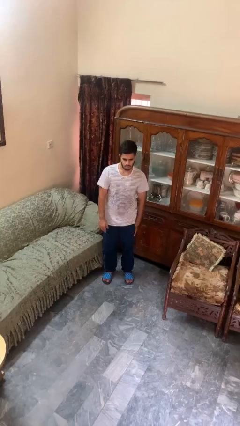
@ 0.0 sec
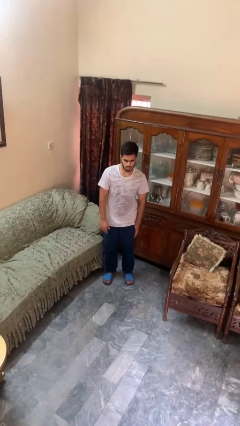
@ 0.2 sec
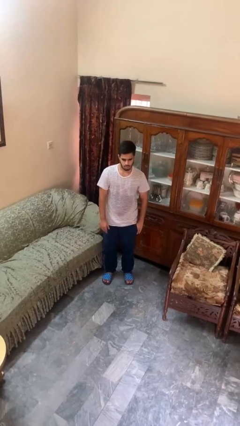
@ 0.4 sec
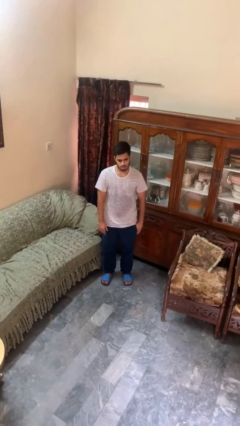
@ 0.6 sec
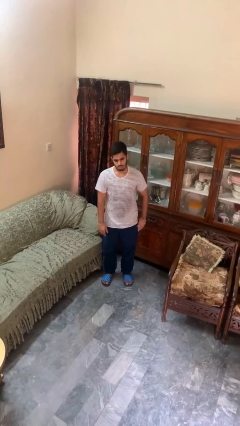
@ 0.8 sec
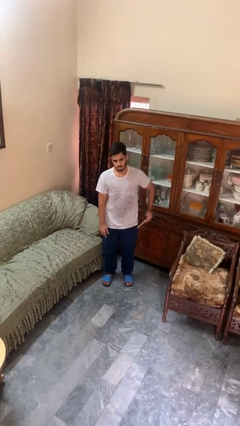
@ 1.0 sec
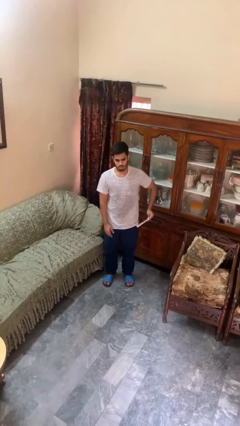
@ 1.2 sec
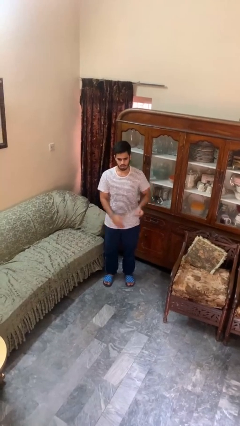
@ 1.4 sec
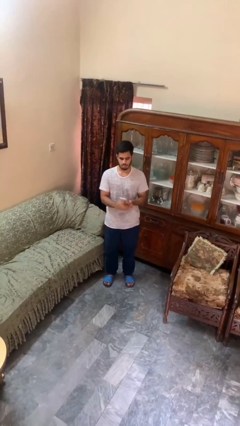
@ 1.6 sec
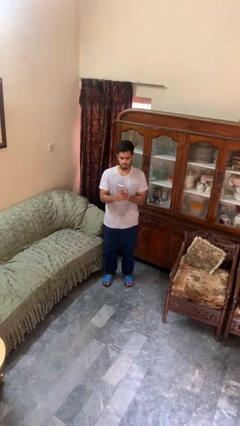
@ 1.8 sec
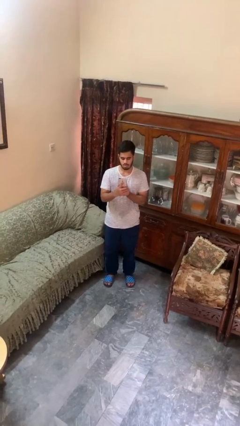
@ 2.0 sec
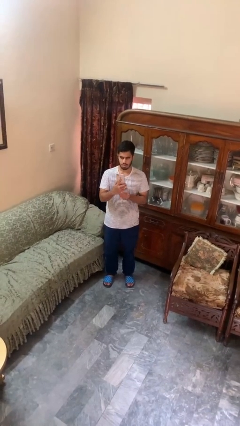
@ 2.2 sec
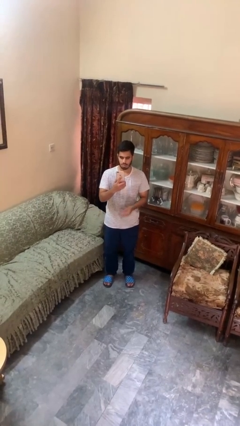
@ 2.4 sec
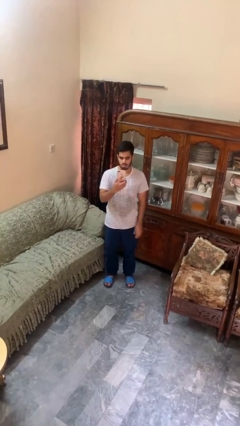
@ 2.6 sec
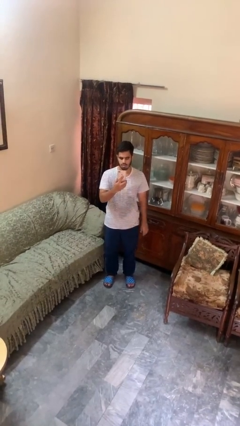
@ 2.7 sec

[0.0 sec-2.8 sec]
person takes phone from pocket

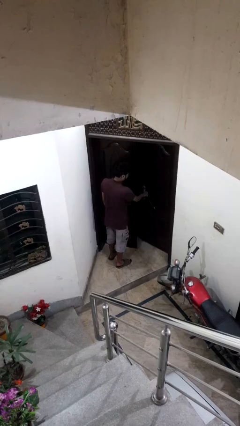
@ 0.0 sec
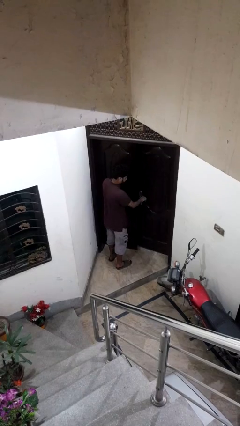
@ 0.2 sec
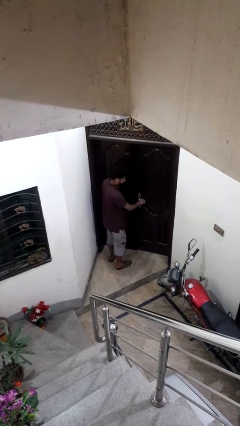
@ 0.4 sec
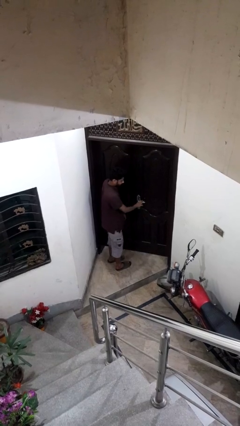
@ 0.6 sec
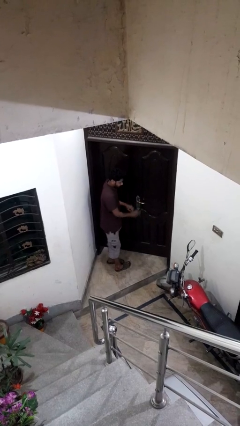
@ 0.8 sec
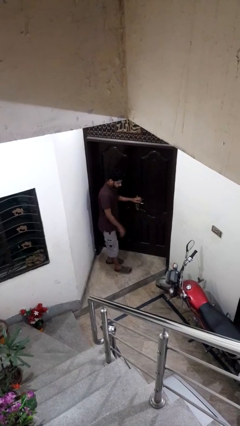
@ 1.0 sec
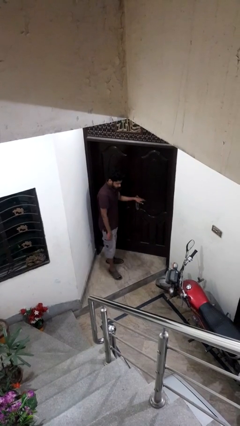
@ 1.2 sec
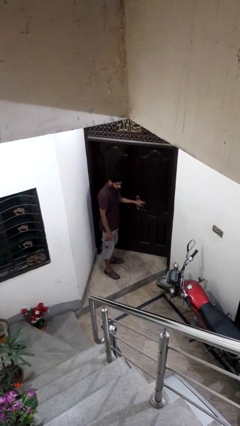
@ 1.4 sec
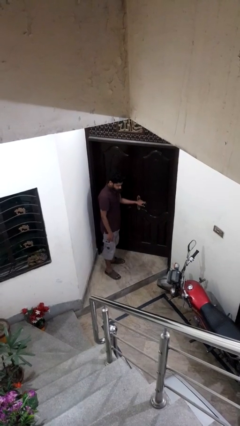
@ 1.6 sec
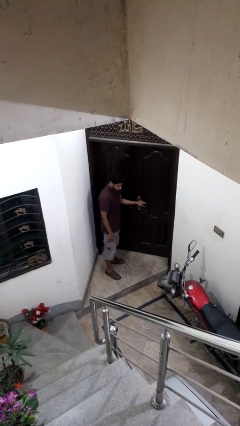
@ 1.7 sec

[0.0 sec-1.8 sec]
person closes facility door

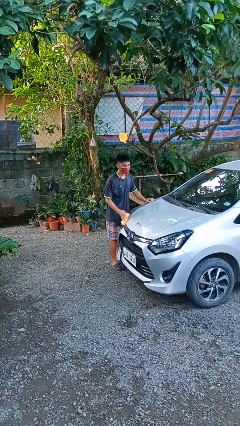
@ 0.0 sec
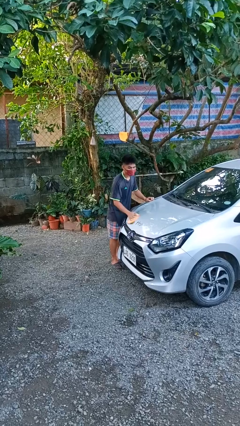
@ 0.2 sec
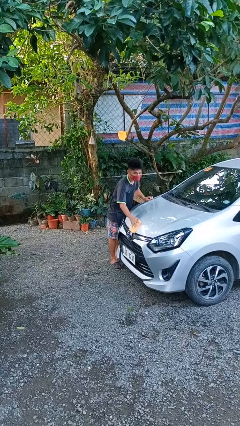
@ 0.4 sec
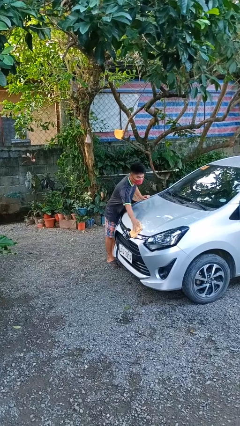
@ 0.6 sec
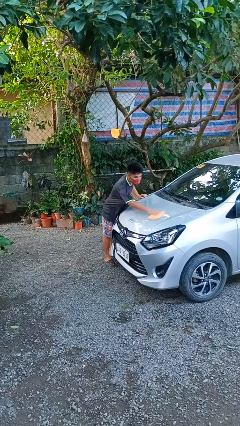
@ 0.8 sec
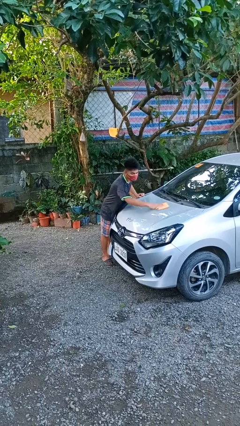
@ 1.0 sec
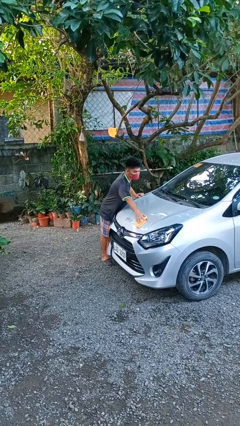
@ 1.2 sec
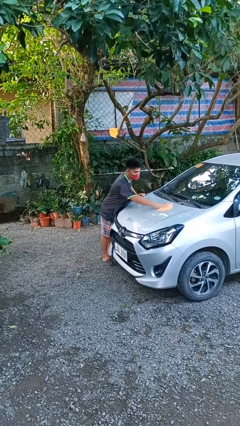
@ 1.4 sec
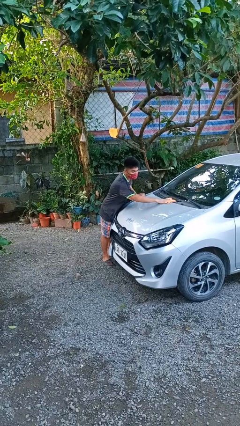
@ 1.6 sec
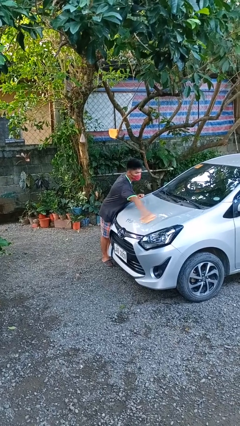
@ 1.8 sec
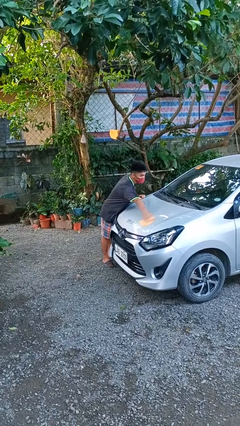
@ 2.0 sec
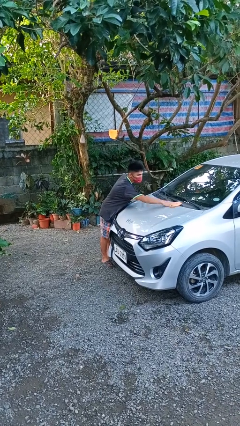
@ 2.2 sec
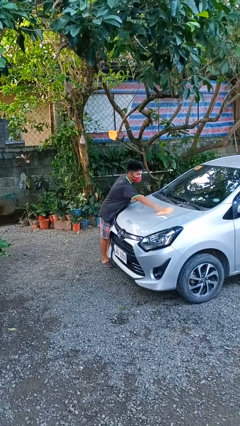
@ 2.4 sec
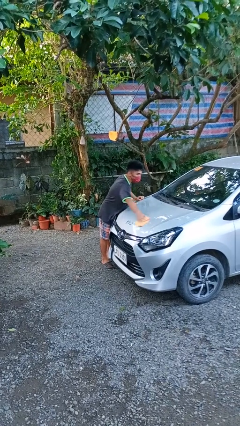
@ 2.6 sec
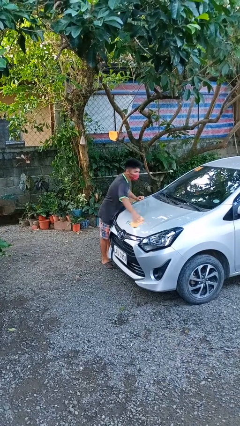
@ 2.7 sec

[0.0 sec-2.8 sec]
person polishes car with rag

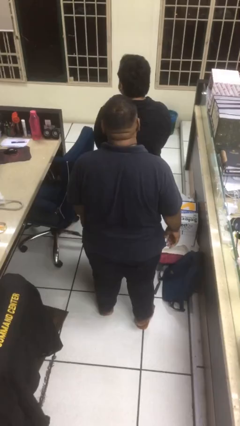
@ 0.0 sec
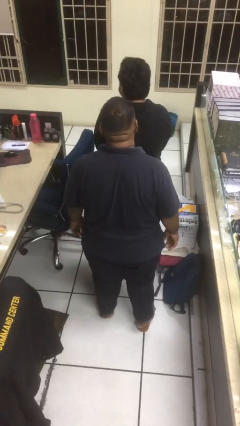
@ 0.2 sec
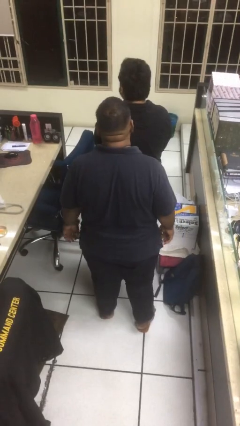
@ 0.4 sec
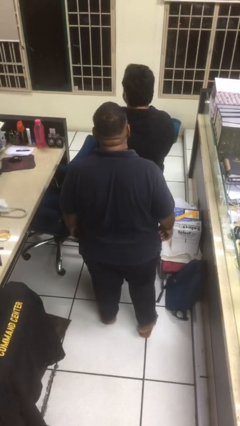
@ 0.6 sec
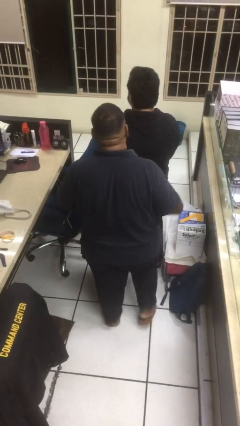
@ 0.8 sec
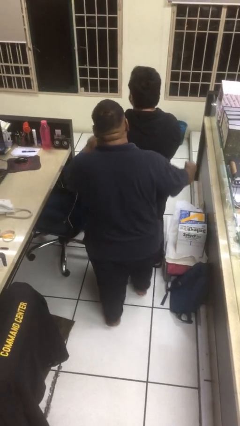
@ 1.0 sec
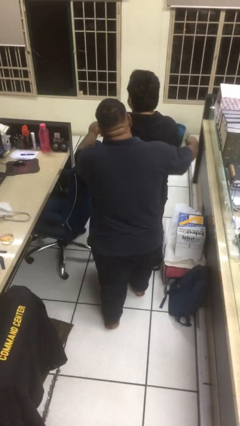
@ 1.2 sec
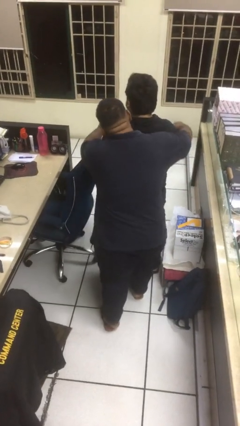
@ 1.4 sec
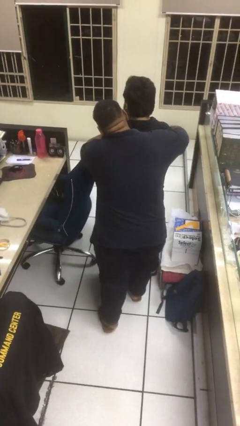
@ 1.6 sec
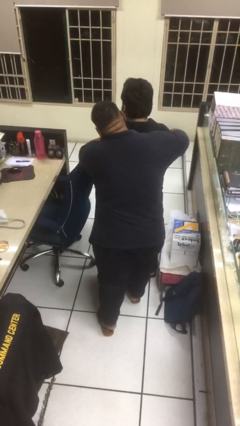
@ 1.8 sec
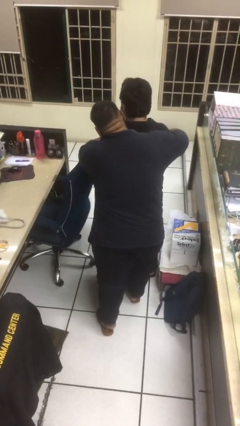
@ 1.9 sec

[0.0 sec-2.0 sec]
person hugs person from behind

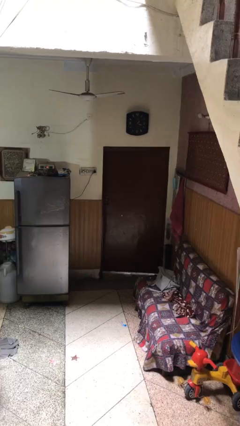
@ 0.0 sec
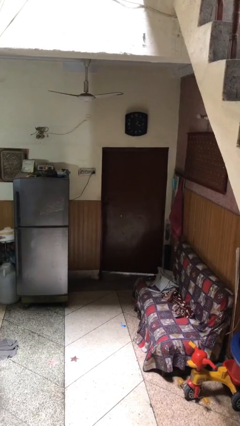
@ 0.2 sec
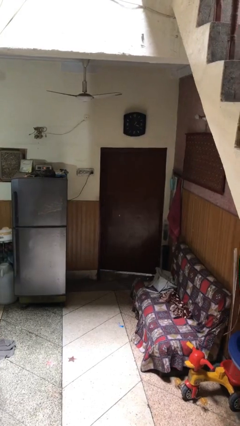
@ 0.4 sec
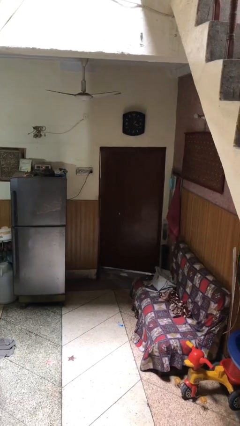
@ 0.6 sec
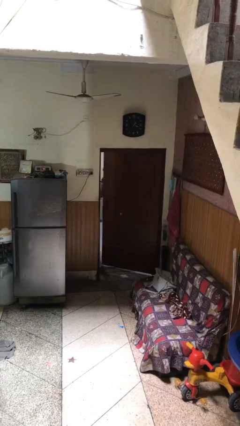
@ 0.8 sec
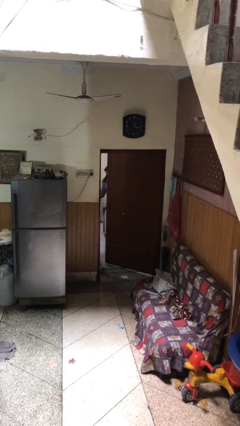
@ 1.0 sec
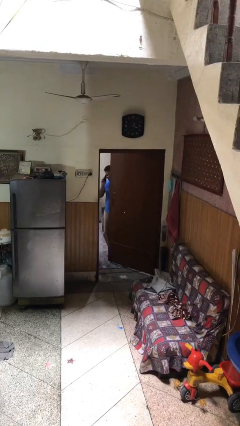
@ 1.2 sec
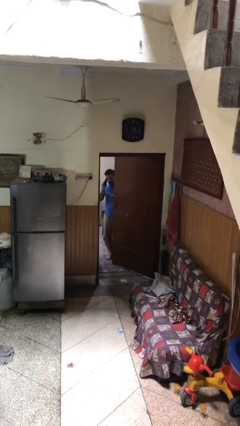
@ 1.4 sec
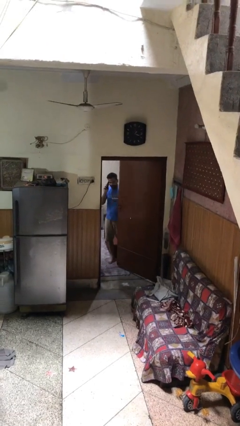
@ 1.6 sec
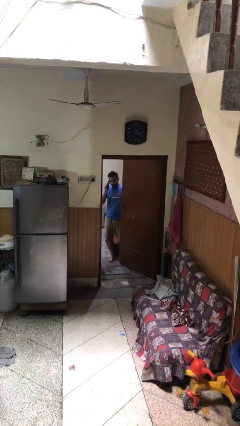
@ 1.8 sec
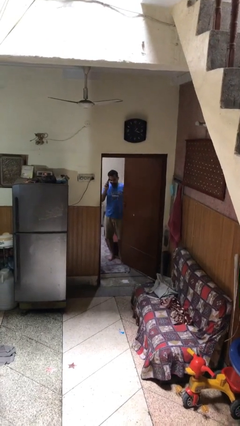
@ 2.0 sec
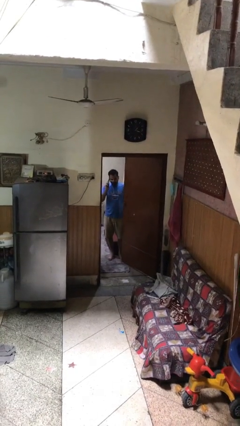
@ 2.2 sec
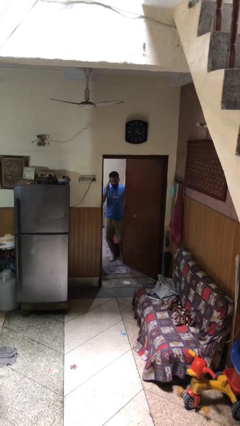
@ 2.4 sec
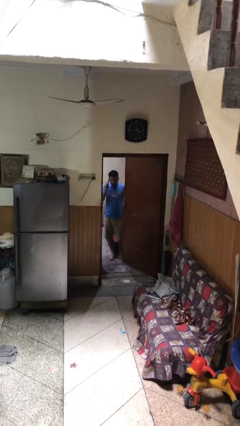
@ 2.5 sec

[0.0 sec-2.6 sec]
person opens facility door

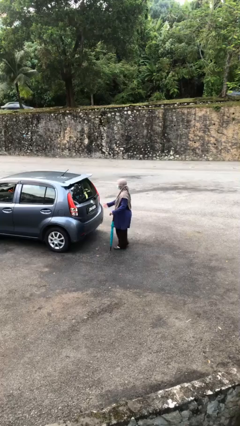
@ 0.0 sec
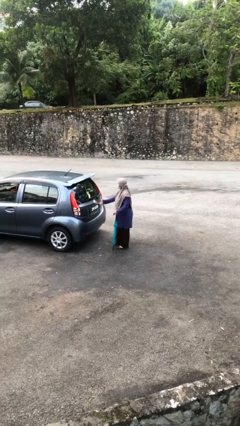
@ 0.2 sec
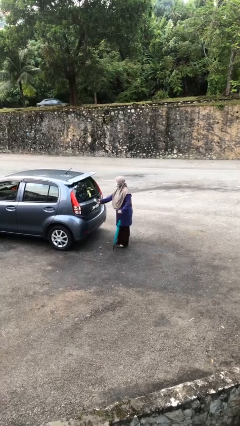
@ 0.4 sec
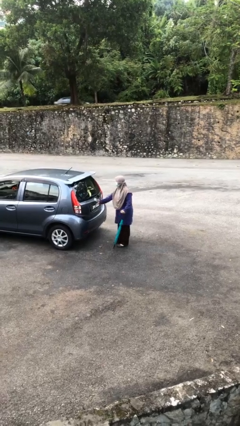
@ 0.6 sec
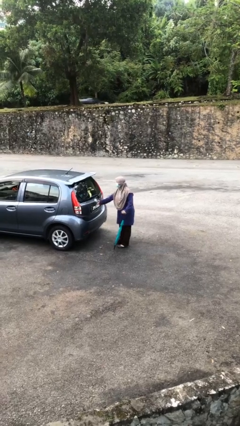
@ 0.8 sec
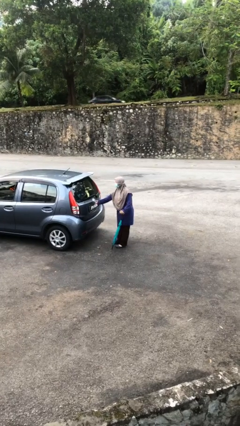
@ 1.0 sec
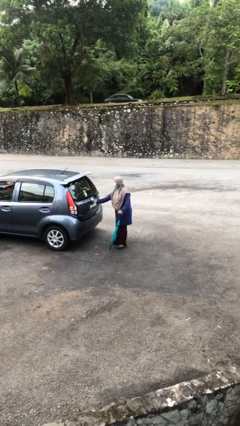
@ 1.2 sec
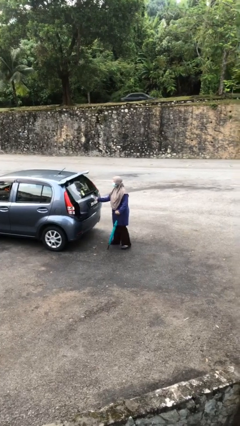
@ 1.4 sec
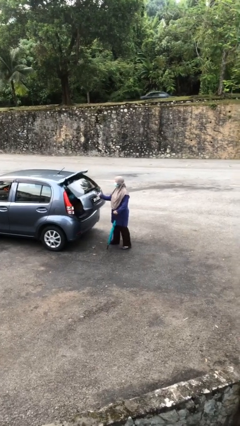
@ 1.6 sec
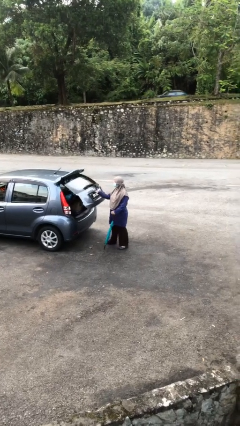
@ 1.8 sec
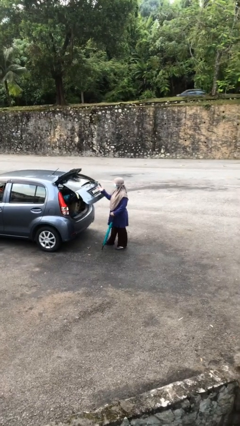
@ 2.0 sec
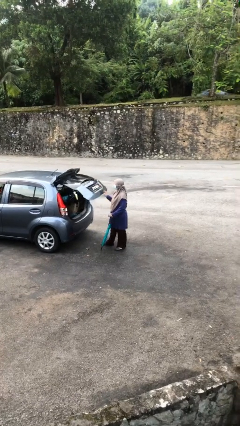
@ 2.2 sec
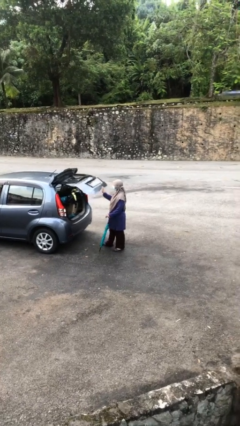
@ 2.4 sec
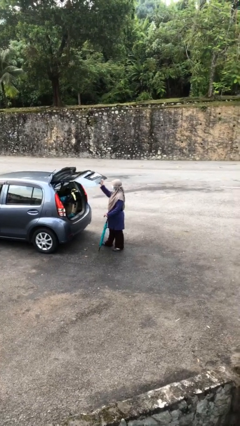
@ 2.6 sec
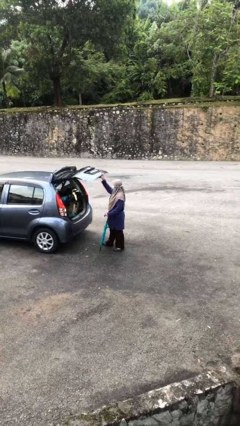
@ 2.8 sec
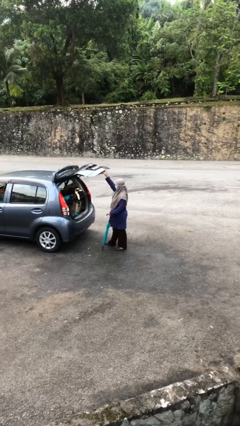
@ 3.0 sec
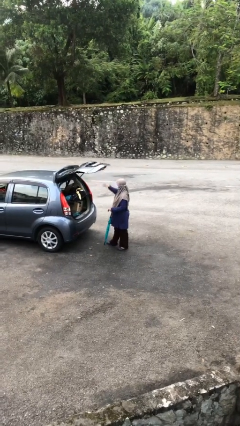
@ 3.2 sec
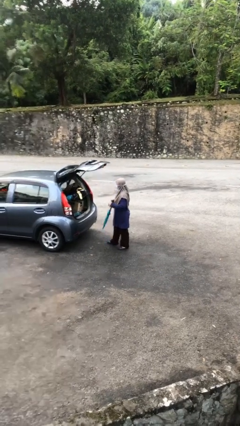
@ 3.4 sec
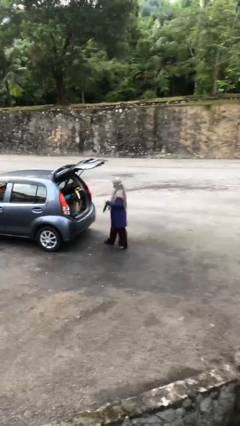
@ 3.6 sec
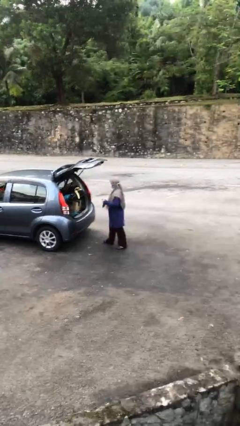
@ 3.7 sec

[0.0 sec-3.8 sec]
person opens car trunk

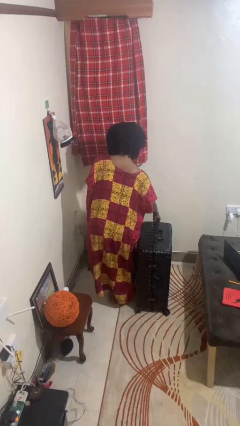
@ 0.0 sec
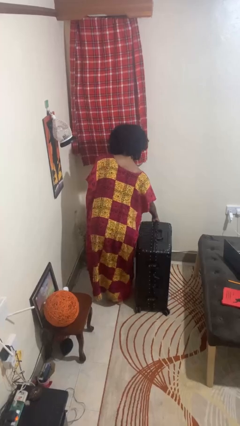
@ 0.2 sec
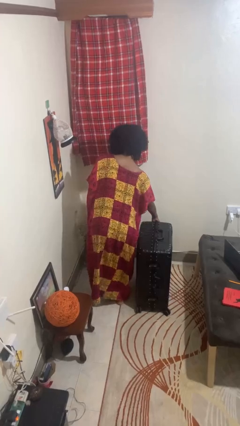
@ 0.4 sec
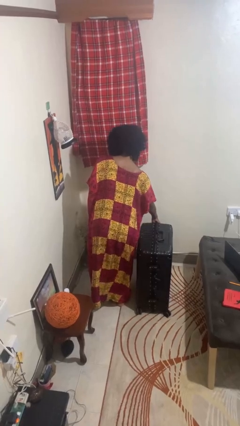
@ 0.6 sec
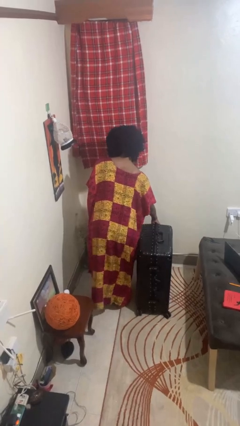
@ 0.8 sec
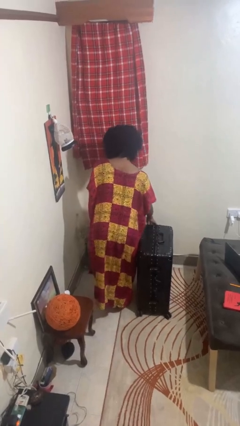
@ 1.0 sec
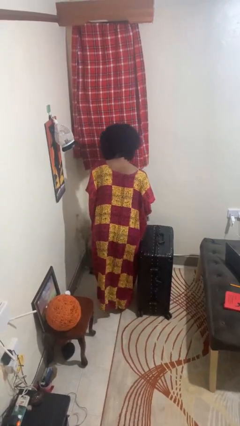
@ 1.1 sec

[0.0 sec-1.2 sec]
person closes suitcase
